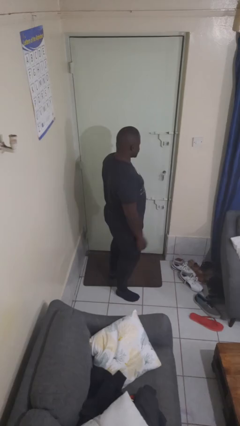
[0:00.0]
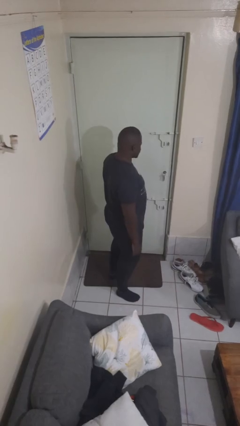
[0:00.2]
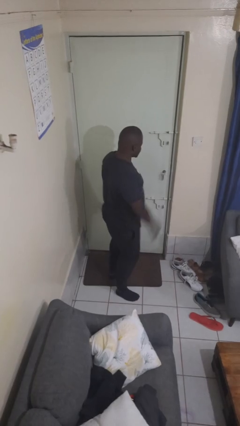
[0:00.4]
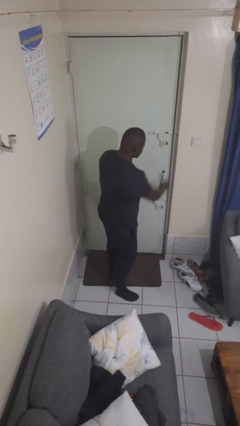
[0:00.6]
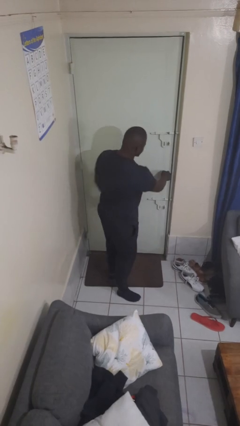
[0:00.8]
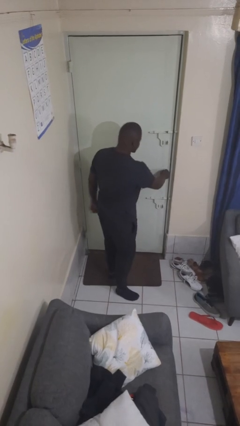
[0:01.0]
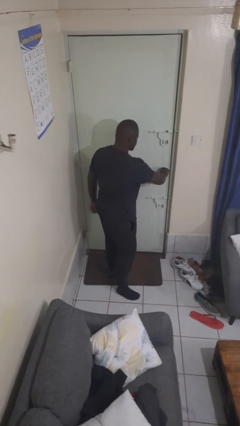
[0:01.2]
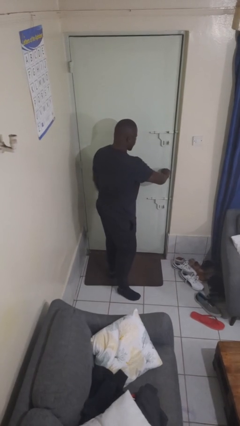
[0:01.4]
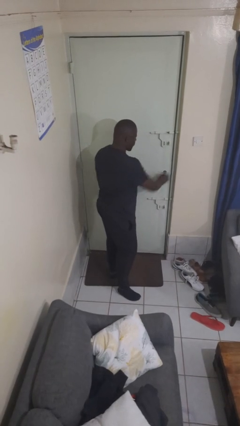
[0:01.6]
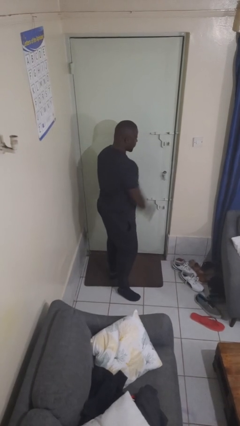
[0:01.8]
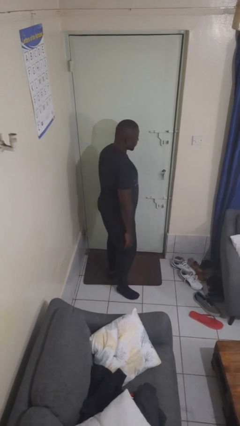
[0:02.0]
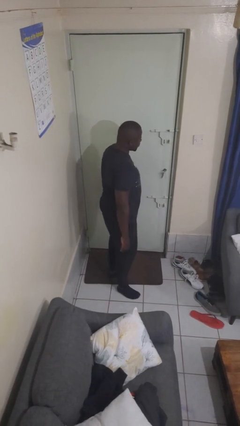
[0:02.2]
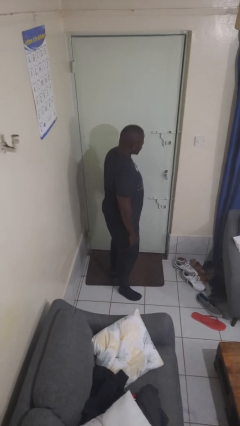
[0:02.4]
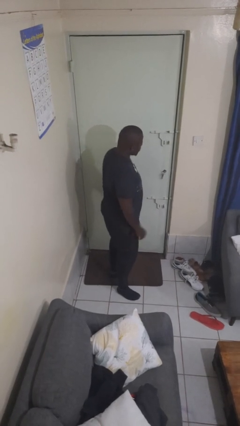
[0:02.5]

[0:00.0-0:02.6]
person unlocks door with keys

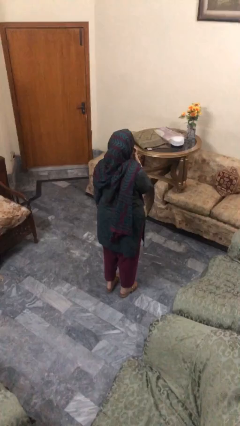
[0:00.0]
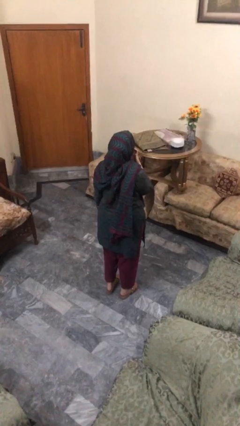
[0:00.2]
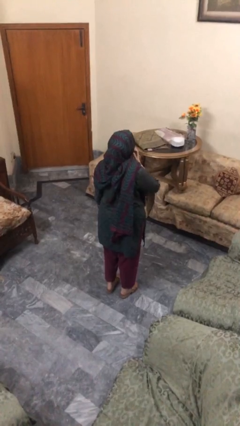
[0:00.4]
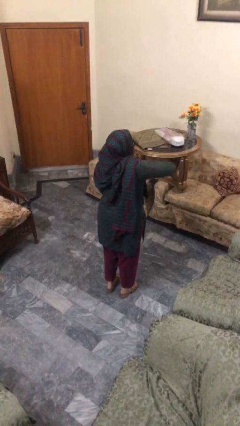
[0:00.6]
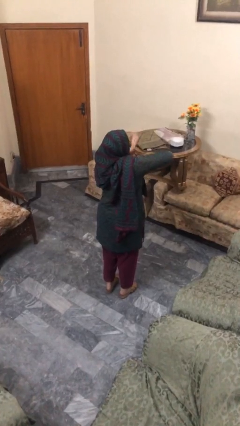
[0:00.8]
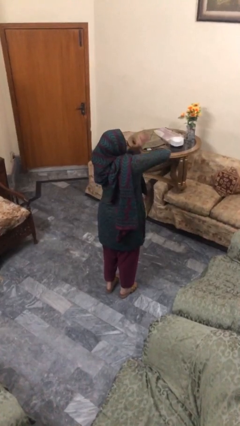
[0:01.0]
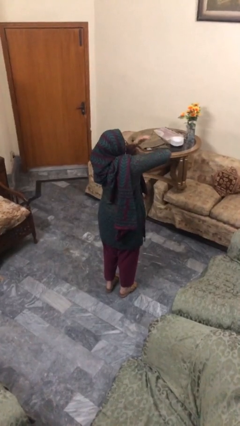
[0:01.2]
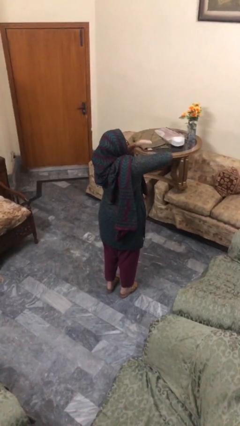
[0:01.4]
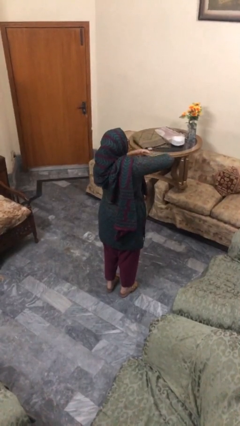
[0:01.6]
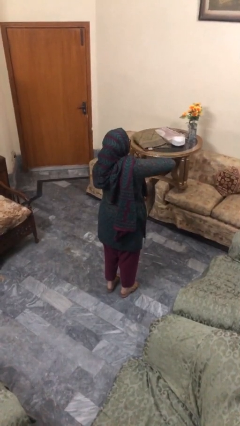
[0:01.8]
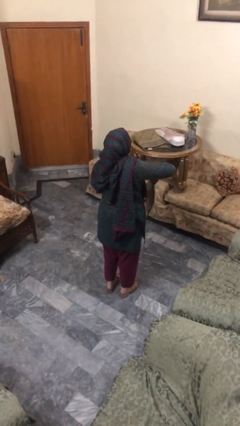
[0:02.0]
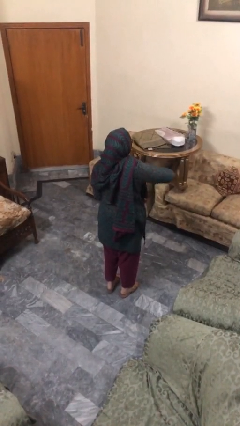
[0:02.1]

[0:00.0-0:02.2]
person swats bug

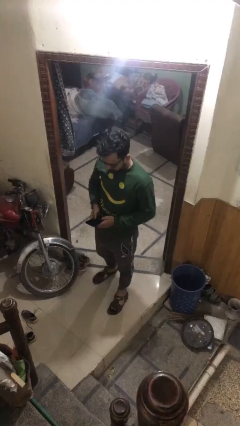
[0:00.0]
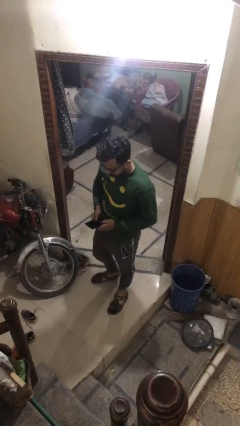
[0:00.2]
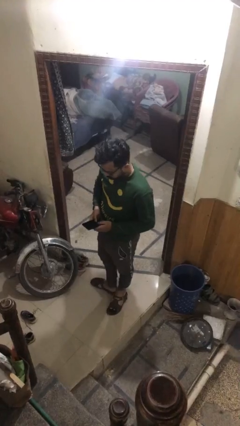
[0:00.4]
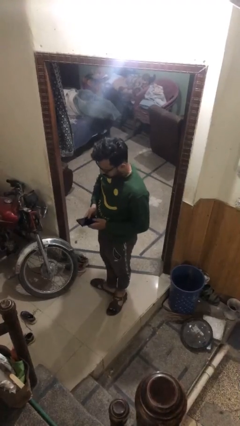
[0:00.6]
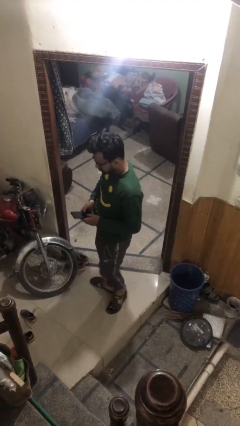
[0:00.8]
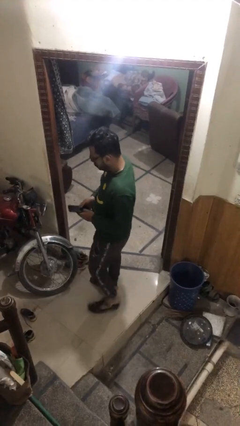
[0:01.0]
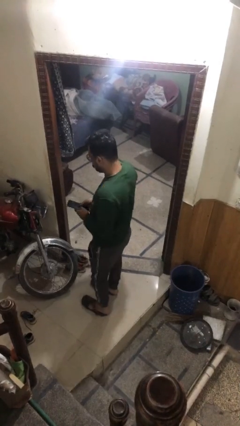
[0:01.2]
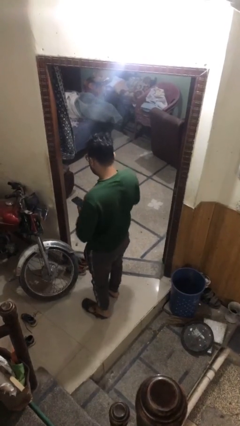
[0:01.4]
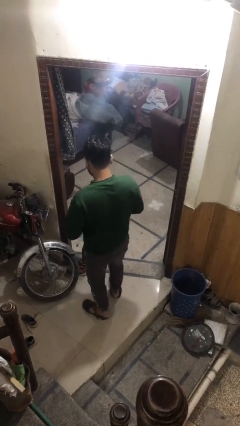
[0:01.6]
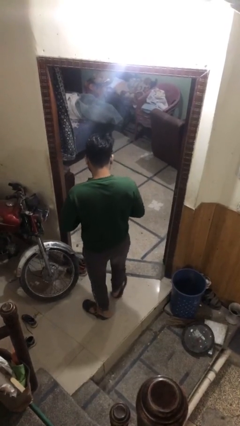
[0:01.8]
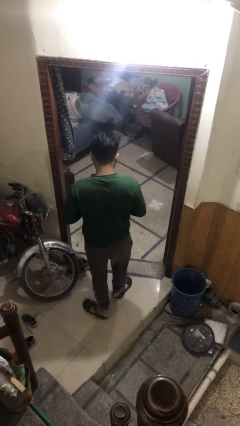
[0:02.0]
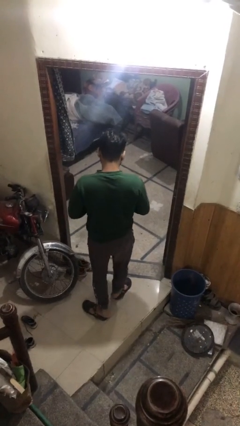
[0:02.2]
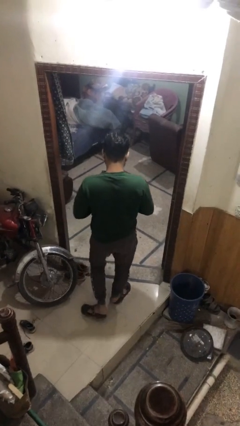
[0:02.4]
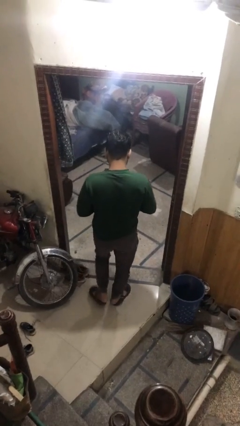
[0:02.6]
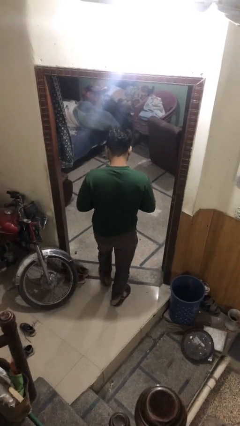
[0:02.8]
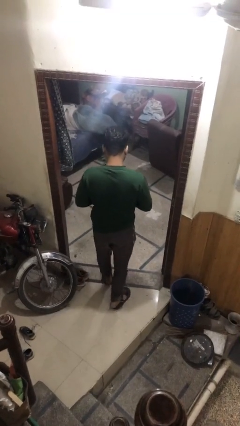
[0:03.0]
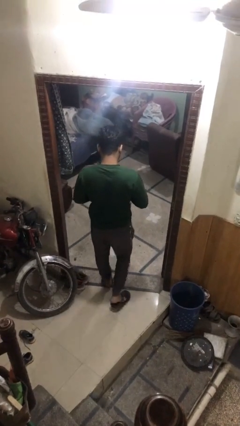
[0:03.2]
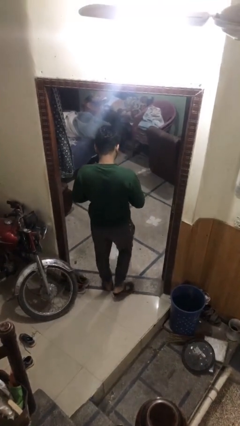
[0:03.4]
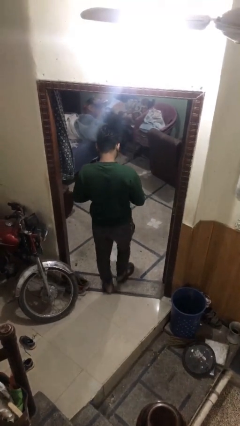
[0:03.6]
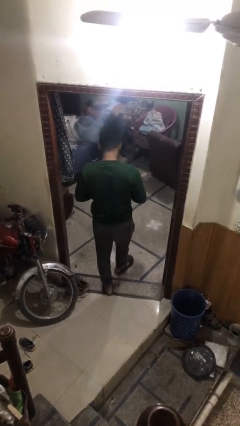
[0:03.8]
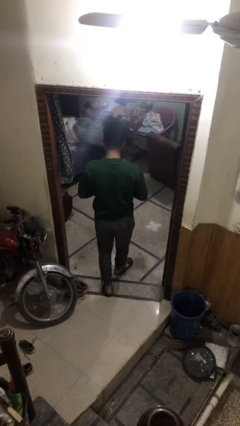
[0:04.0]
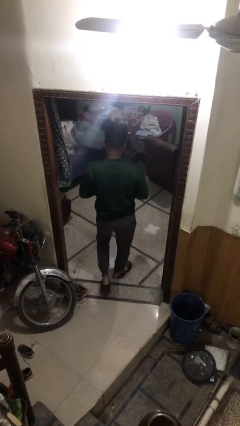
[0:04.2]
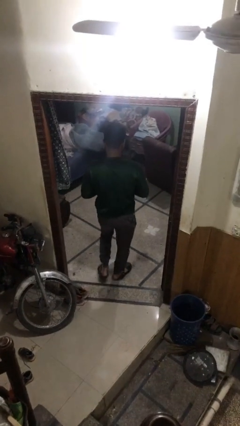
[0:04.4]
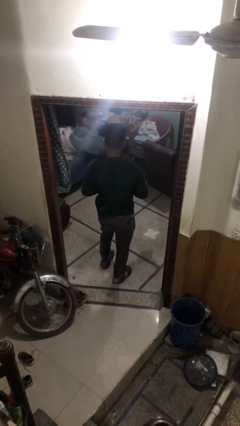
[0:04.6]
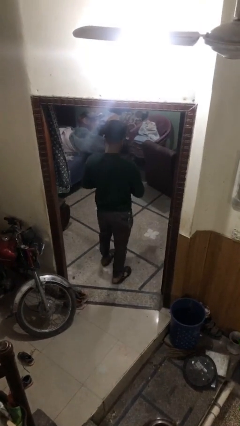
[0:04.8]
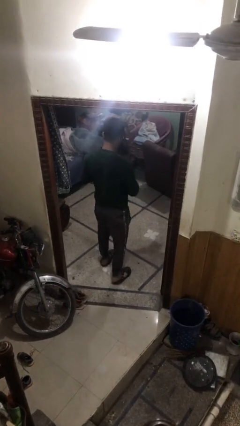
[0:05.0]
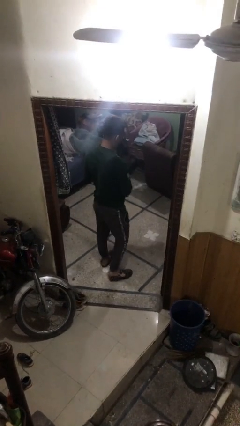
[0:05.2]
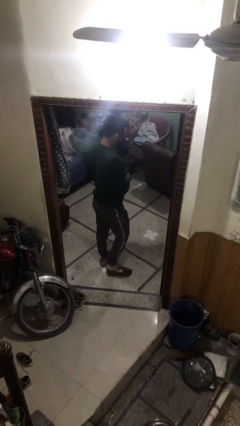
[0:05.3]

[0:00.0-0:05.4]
person exits scene through structure

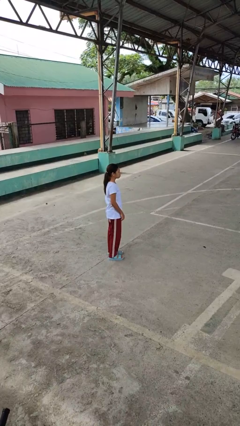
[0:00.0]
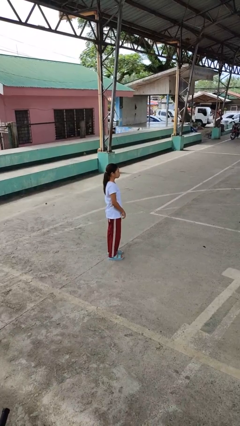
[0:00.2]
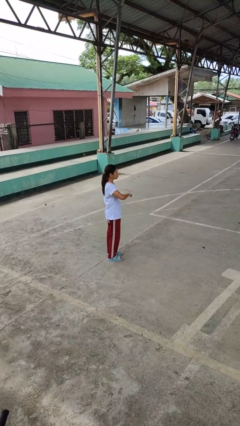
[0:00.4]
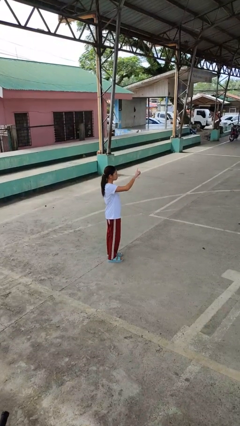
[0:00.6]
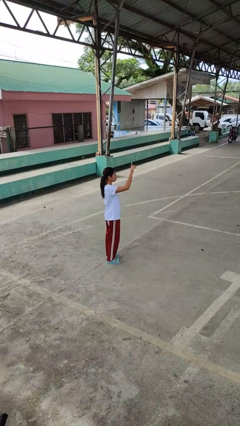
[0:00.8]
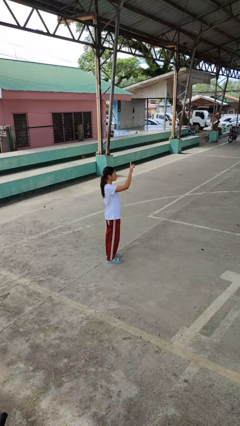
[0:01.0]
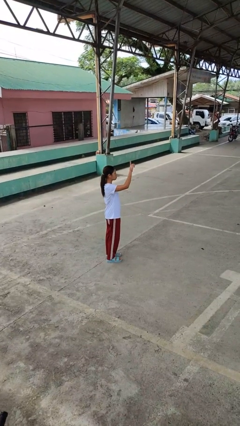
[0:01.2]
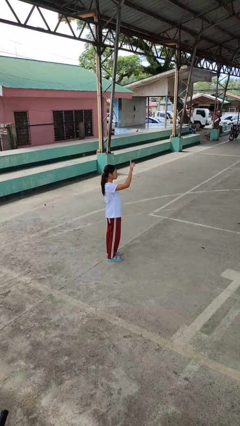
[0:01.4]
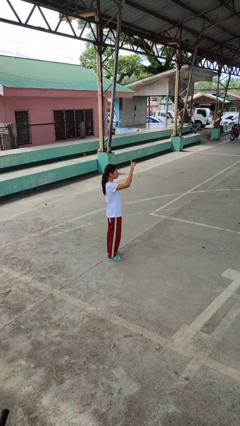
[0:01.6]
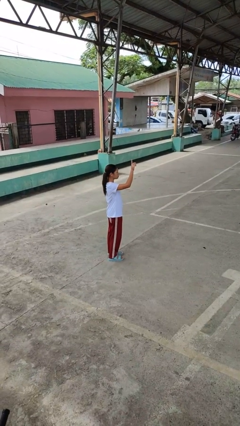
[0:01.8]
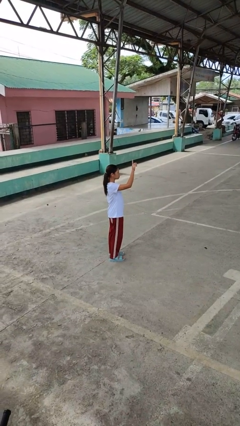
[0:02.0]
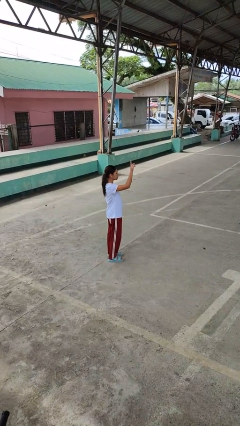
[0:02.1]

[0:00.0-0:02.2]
person gestures swipe up

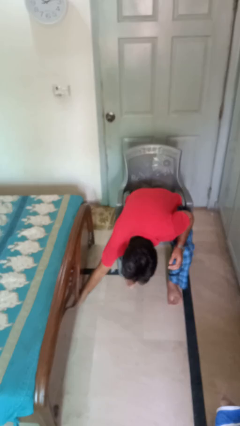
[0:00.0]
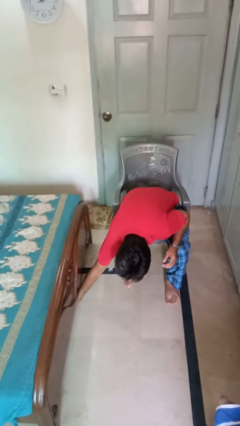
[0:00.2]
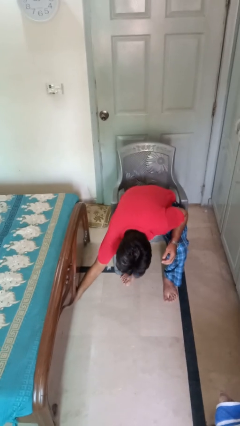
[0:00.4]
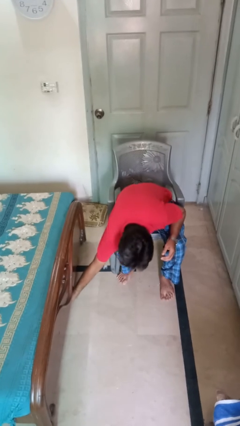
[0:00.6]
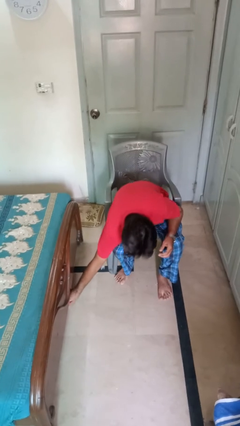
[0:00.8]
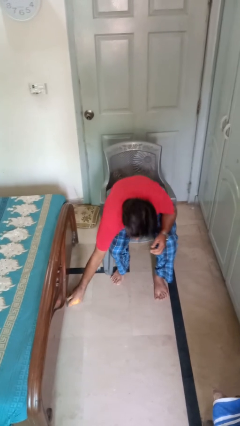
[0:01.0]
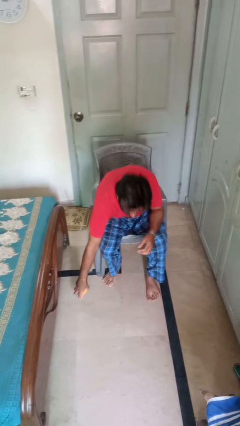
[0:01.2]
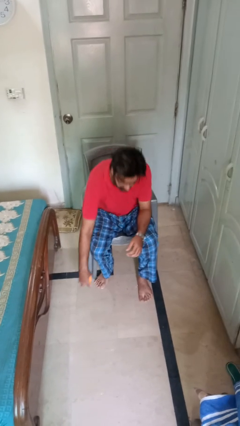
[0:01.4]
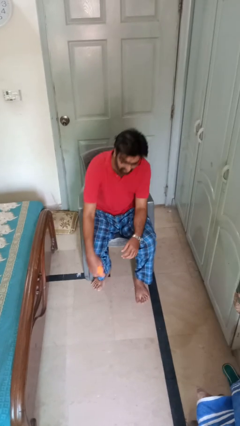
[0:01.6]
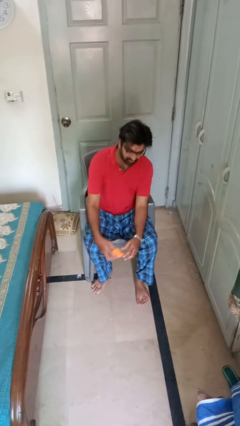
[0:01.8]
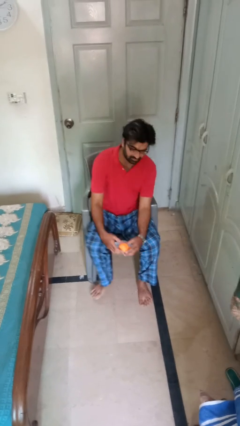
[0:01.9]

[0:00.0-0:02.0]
person picks up object from floor

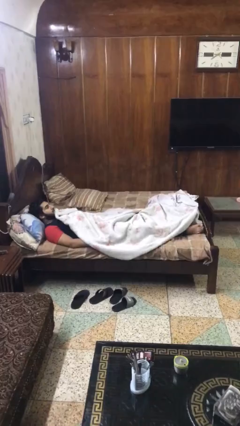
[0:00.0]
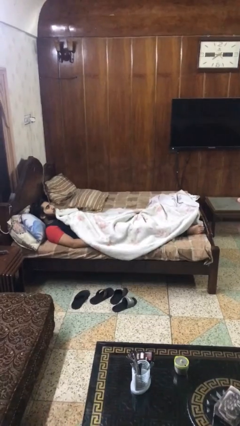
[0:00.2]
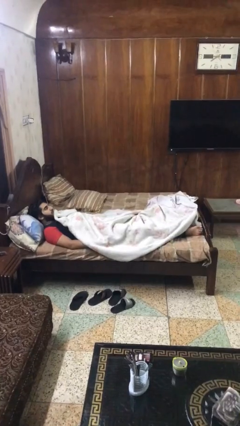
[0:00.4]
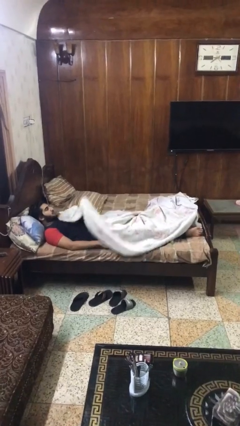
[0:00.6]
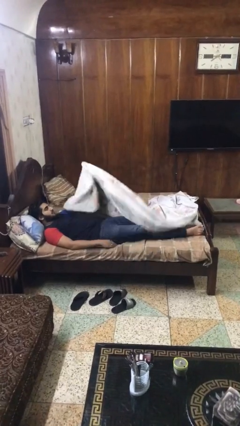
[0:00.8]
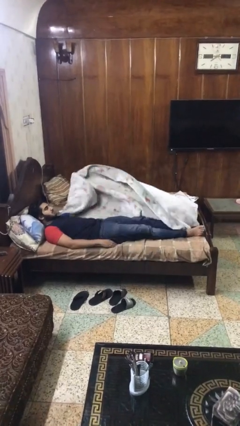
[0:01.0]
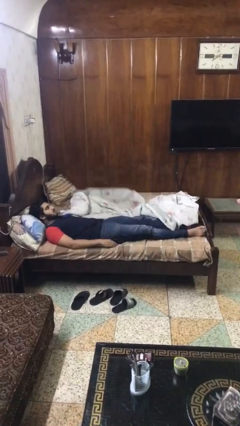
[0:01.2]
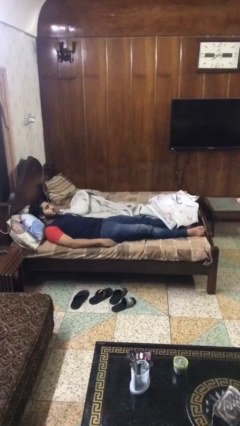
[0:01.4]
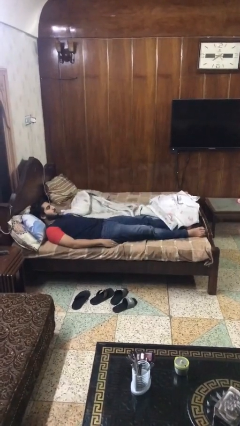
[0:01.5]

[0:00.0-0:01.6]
person uncovers with blanket

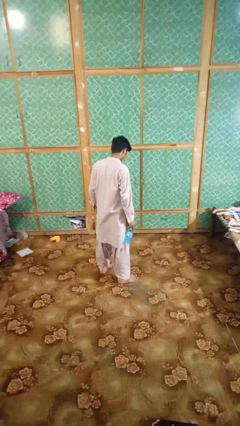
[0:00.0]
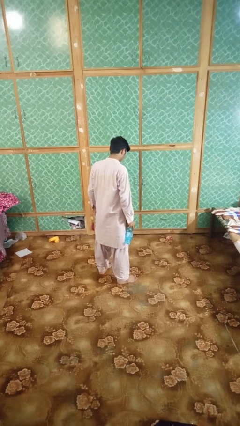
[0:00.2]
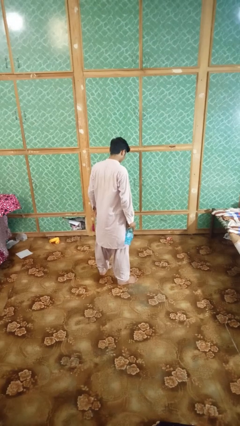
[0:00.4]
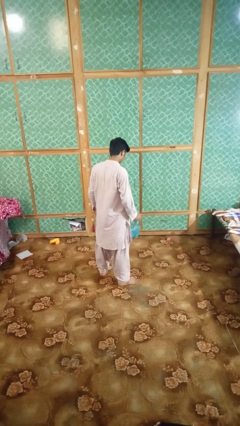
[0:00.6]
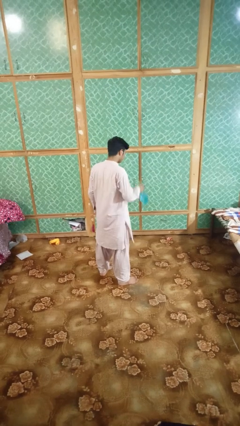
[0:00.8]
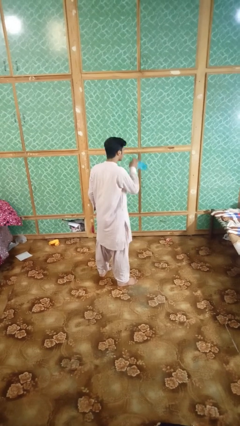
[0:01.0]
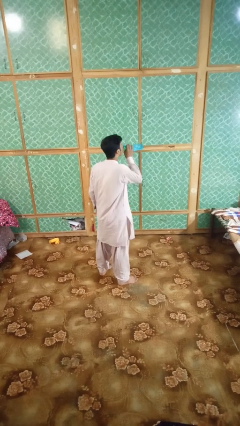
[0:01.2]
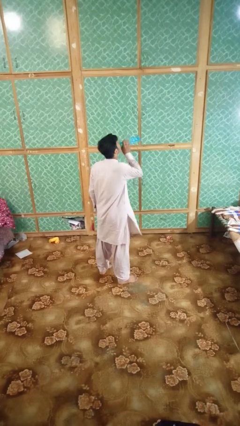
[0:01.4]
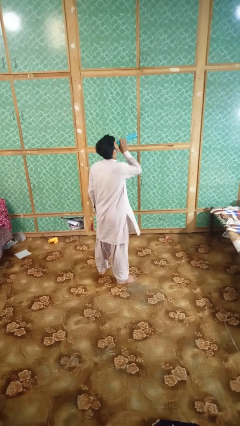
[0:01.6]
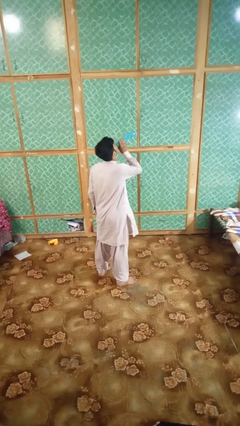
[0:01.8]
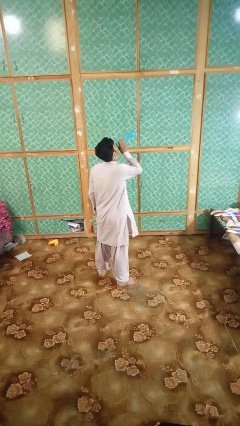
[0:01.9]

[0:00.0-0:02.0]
person drinks from bottle
